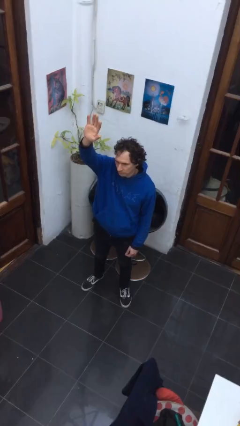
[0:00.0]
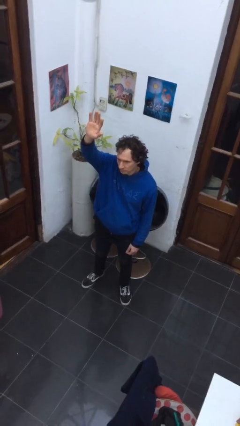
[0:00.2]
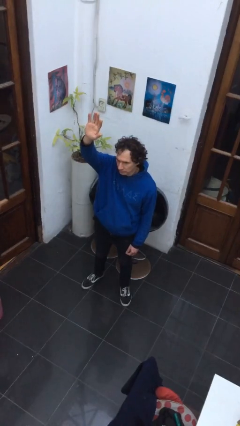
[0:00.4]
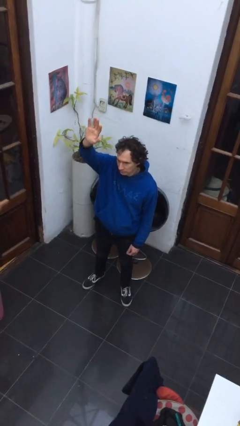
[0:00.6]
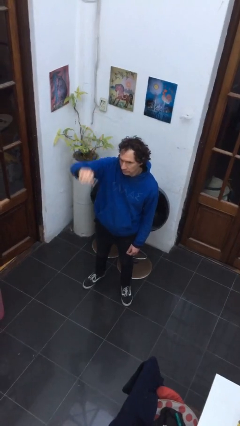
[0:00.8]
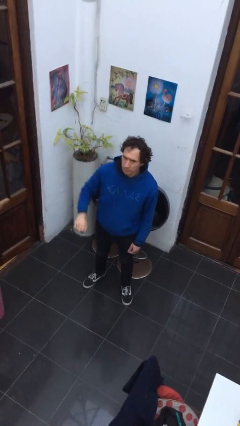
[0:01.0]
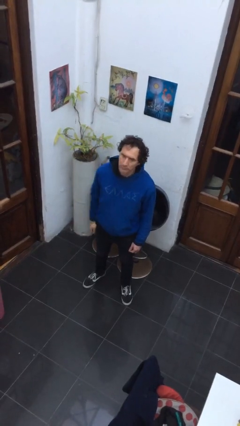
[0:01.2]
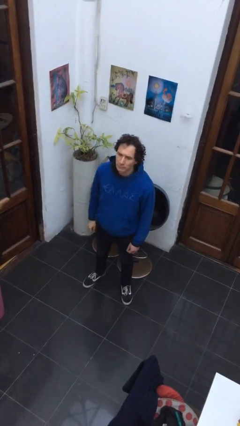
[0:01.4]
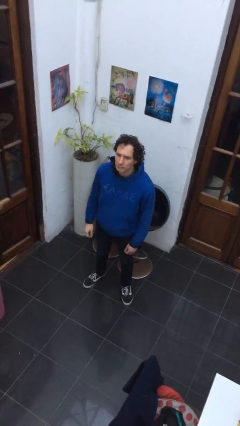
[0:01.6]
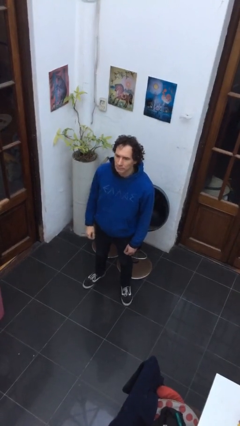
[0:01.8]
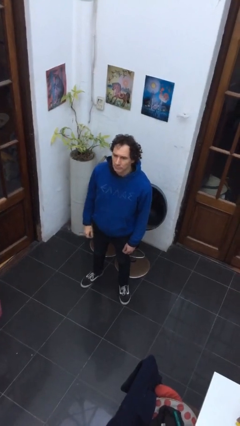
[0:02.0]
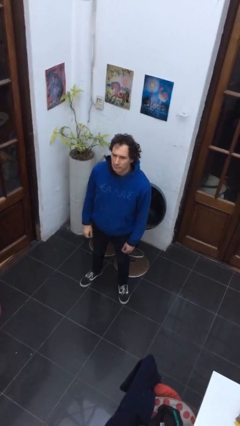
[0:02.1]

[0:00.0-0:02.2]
person gestures lower hand

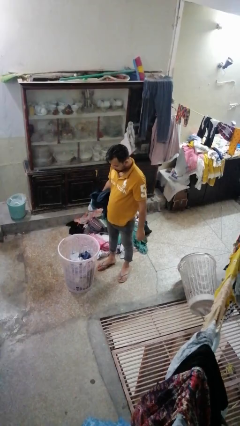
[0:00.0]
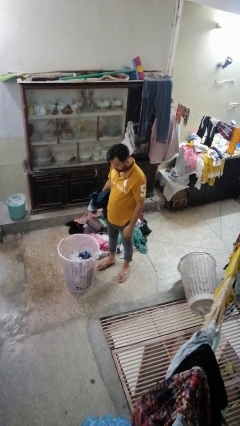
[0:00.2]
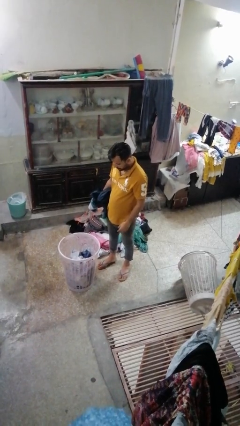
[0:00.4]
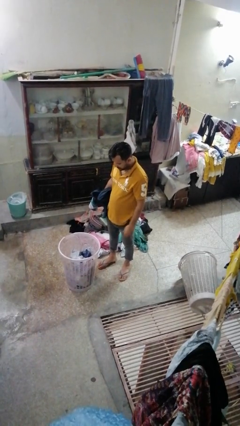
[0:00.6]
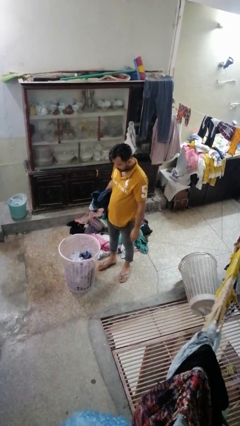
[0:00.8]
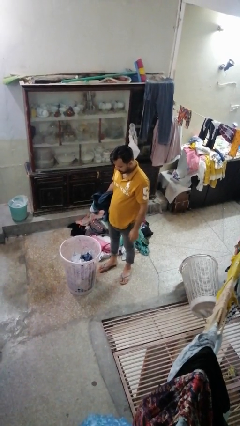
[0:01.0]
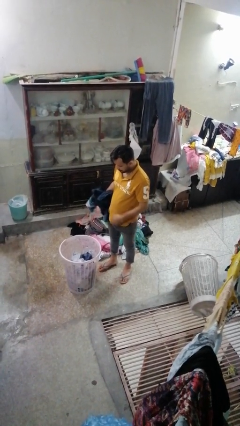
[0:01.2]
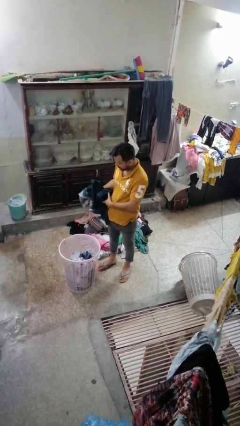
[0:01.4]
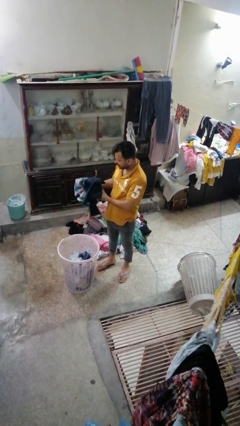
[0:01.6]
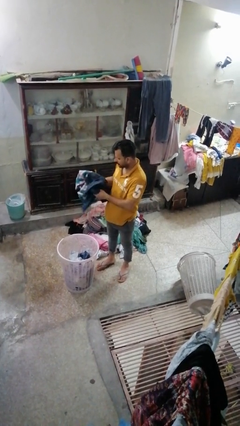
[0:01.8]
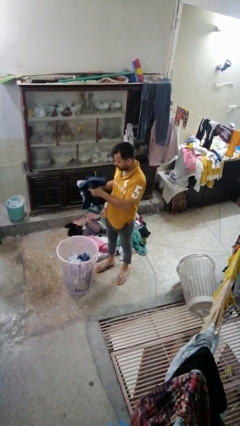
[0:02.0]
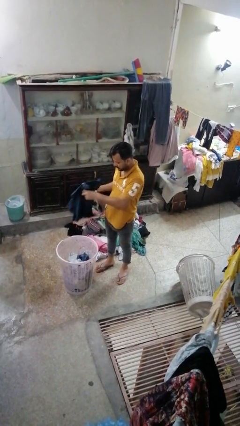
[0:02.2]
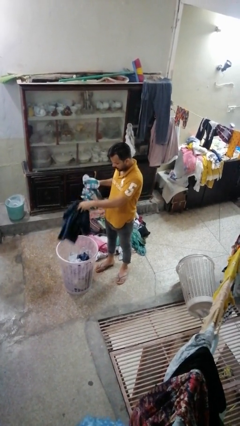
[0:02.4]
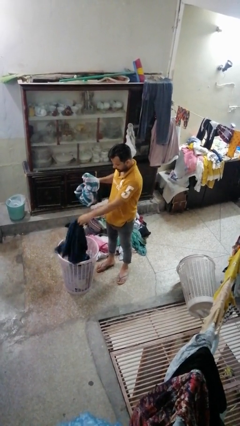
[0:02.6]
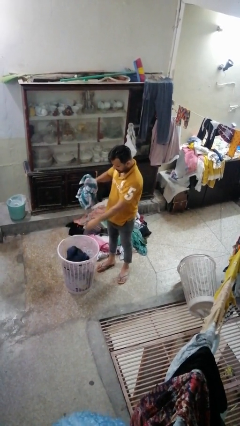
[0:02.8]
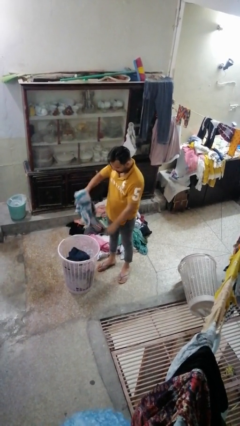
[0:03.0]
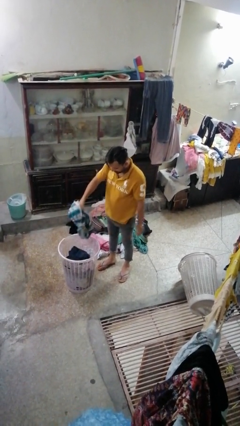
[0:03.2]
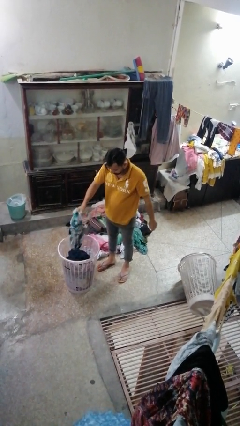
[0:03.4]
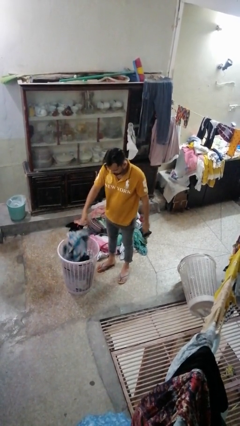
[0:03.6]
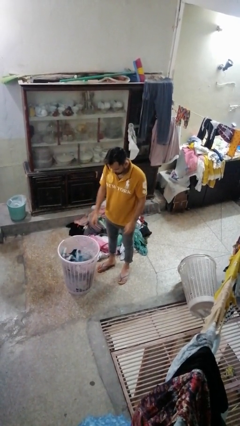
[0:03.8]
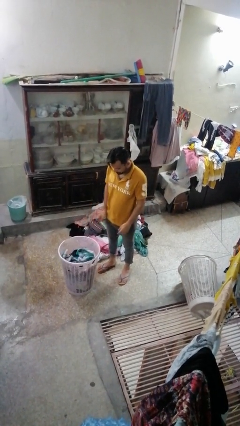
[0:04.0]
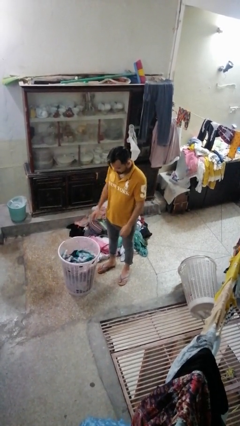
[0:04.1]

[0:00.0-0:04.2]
person puts object into basket

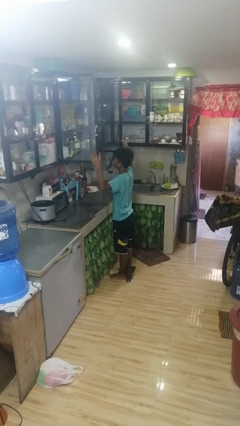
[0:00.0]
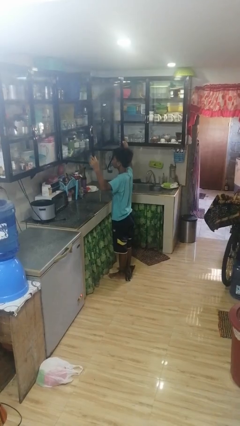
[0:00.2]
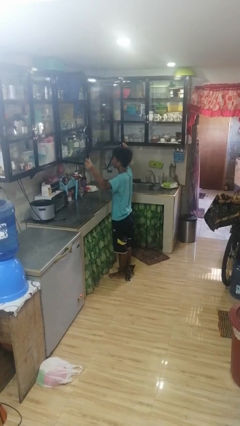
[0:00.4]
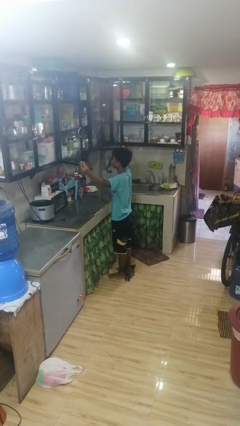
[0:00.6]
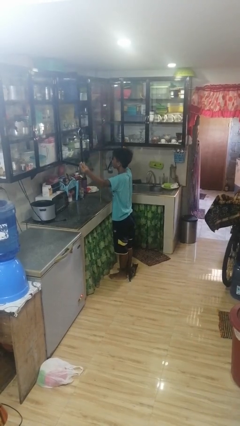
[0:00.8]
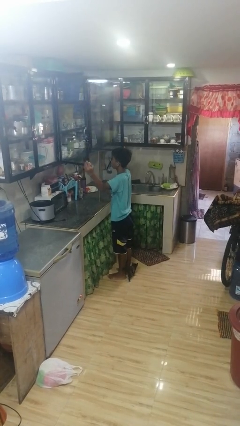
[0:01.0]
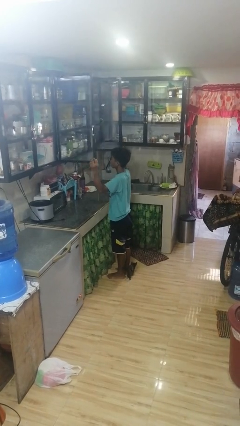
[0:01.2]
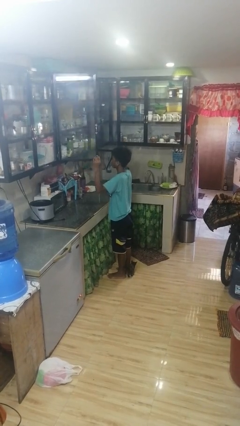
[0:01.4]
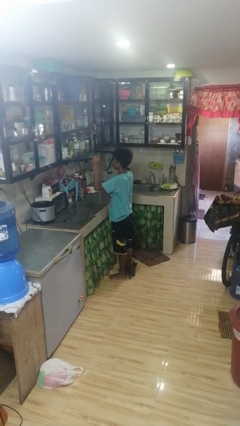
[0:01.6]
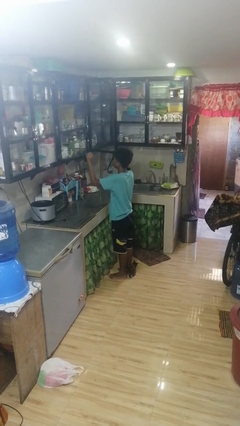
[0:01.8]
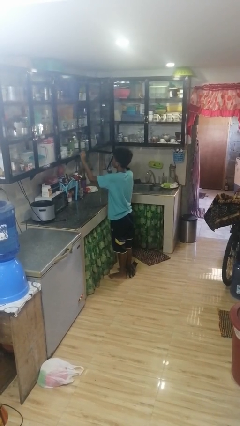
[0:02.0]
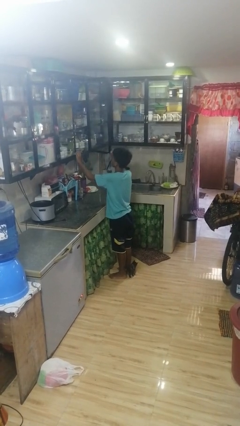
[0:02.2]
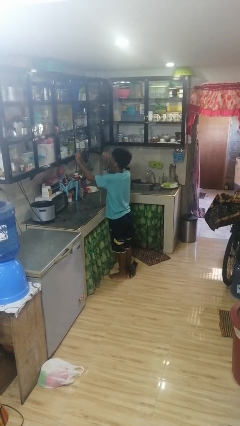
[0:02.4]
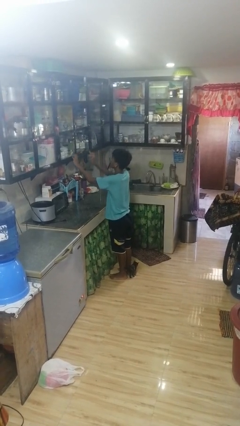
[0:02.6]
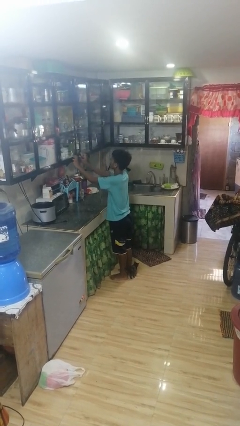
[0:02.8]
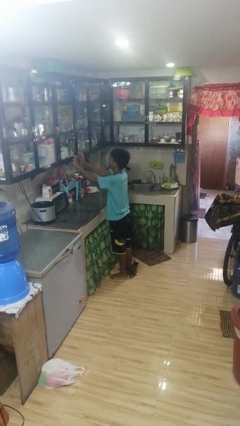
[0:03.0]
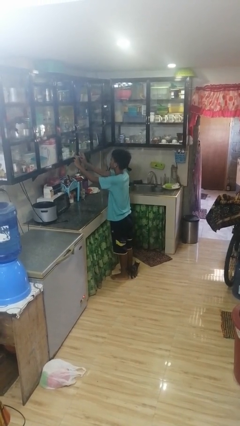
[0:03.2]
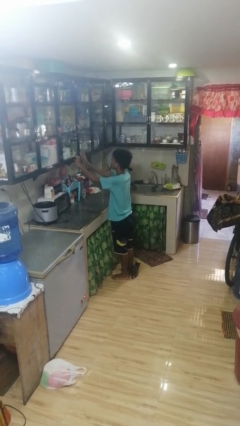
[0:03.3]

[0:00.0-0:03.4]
person closes cabinet

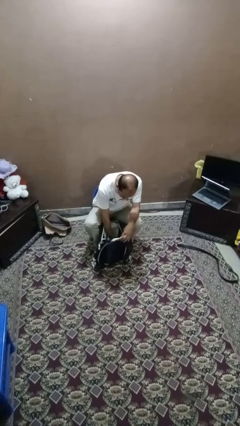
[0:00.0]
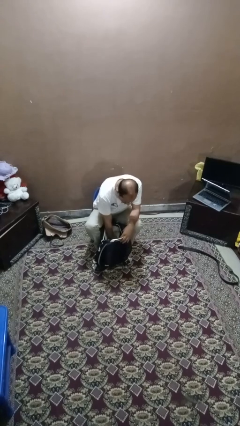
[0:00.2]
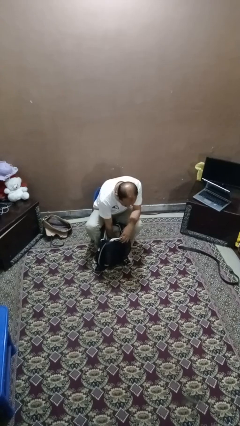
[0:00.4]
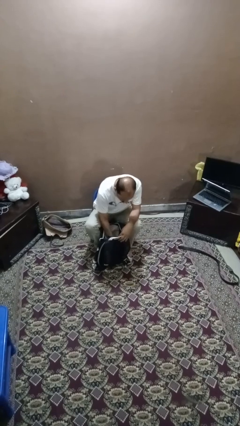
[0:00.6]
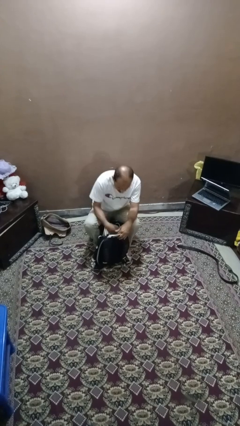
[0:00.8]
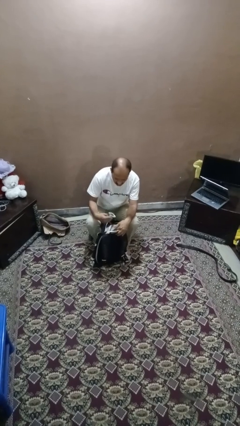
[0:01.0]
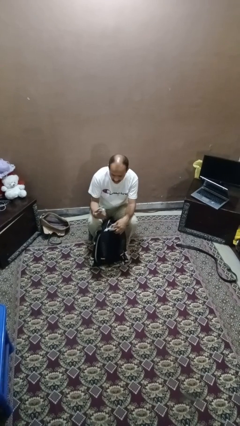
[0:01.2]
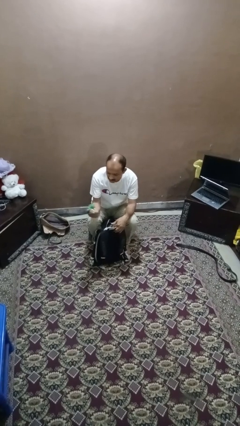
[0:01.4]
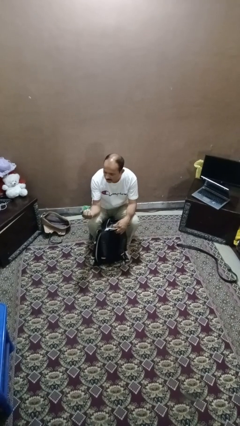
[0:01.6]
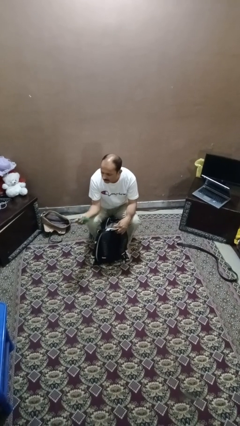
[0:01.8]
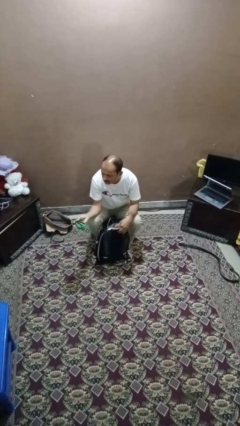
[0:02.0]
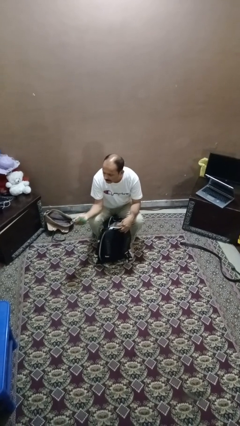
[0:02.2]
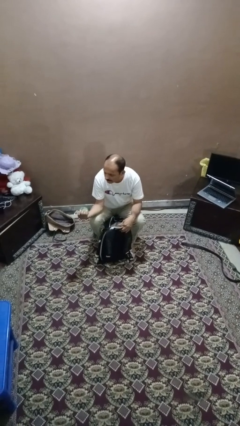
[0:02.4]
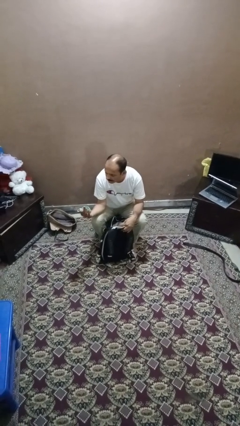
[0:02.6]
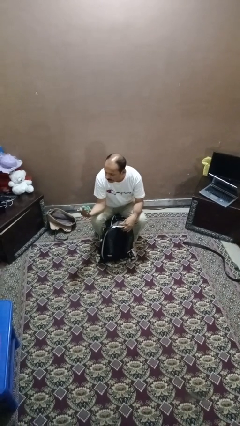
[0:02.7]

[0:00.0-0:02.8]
person takes object from backpack

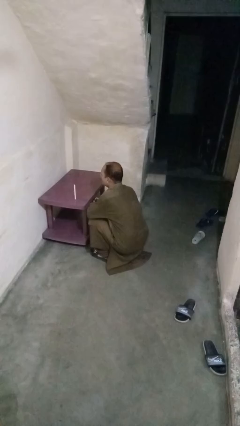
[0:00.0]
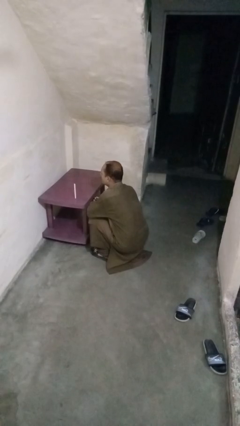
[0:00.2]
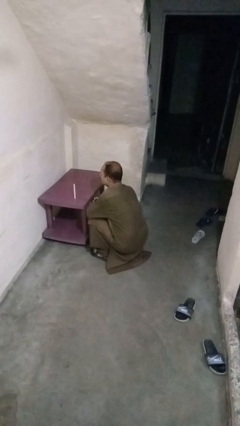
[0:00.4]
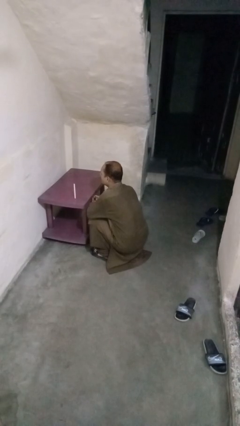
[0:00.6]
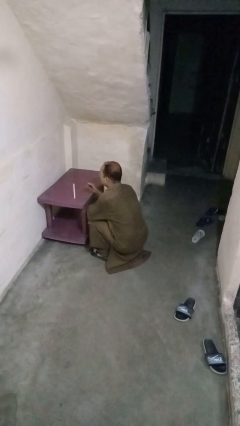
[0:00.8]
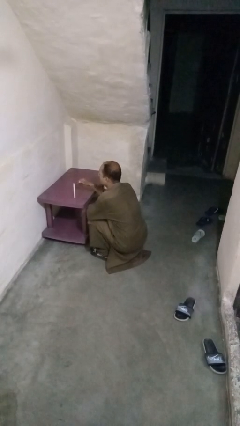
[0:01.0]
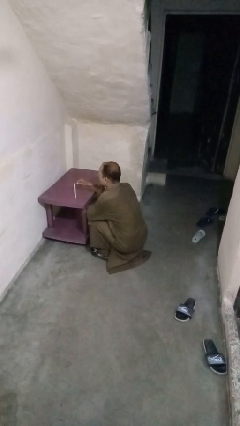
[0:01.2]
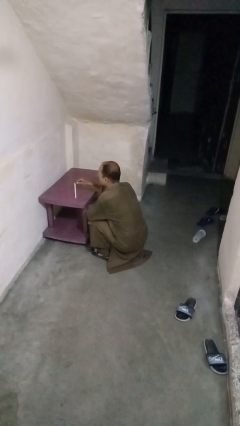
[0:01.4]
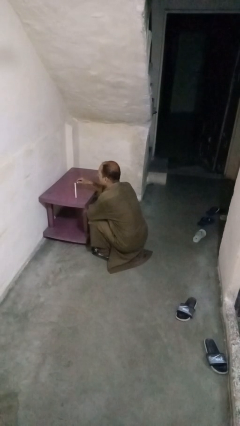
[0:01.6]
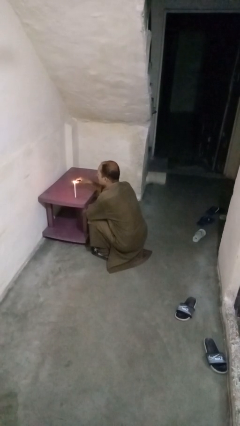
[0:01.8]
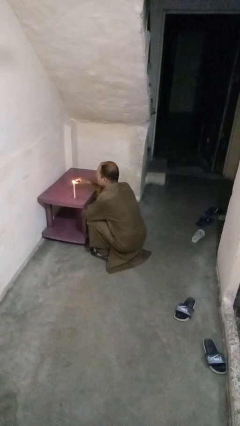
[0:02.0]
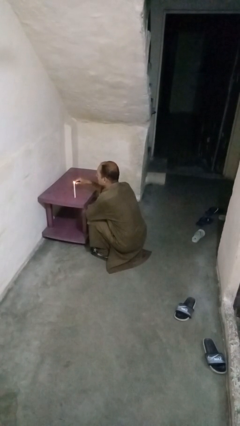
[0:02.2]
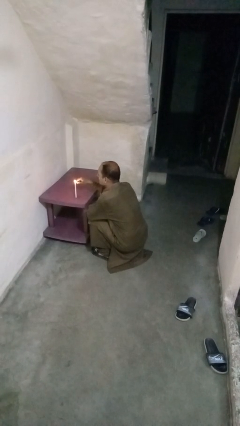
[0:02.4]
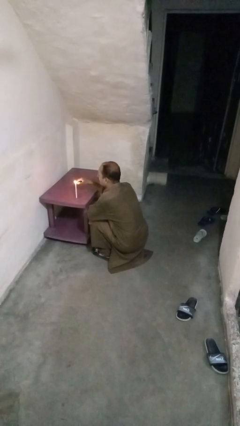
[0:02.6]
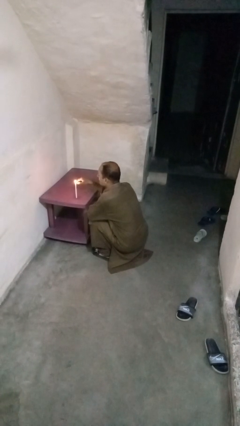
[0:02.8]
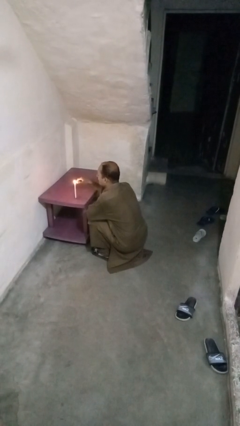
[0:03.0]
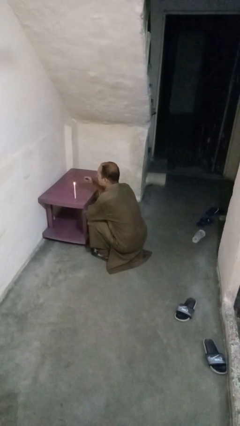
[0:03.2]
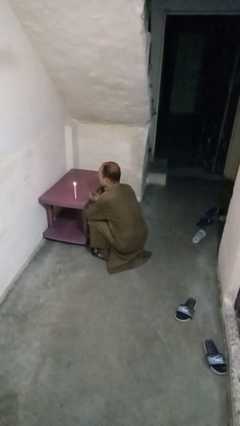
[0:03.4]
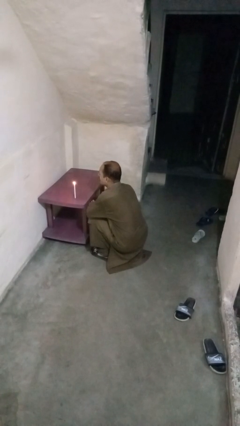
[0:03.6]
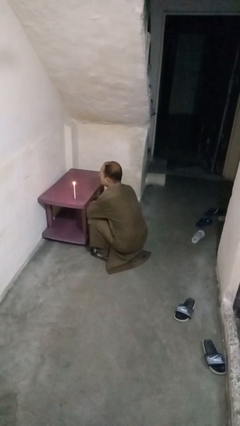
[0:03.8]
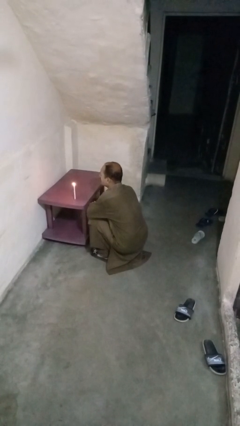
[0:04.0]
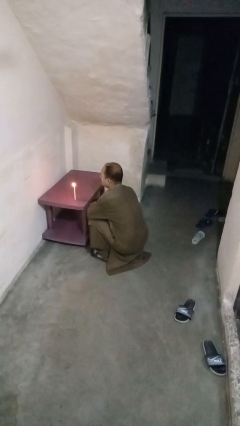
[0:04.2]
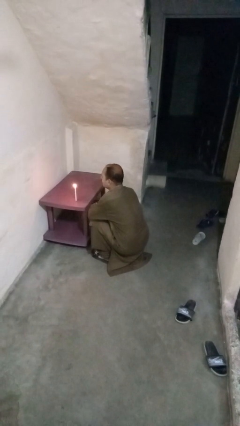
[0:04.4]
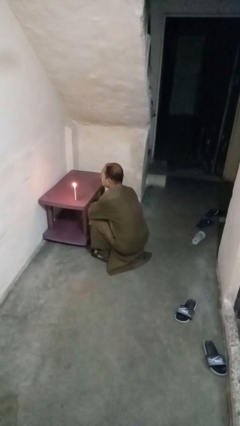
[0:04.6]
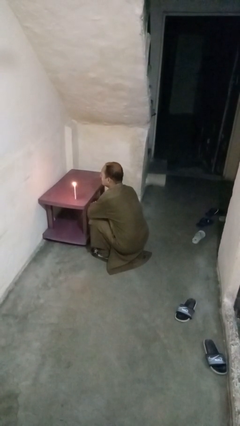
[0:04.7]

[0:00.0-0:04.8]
person lights candle
